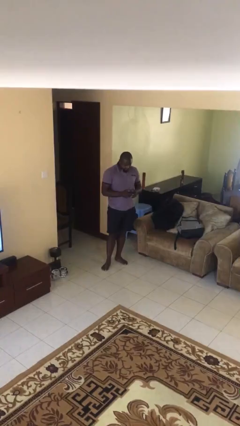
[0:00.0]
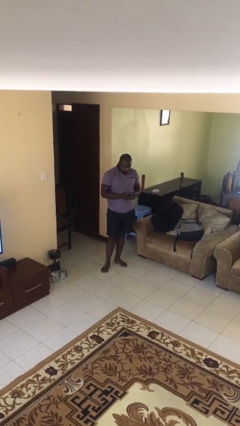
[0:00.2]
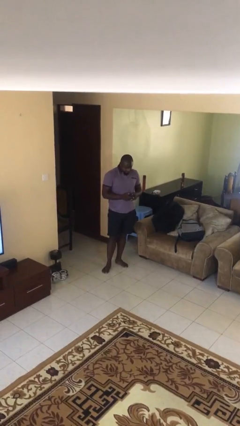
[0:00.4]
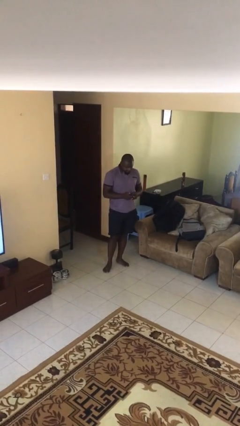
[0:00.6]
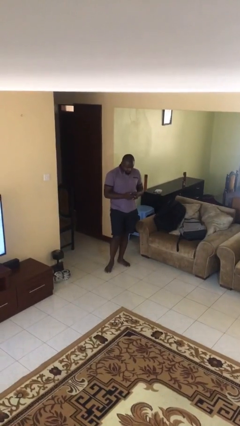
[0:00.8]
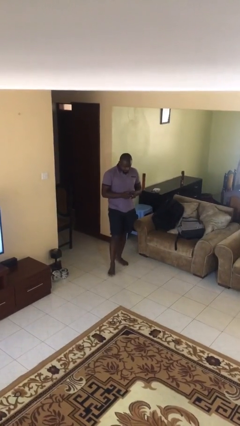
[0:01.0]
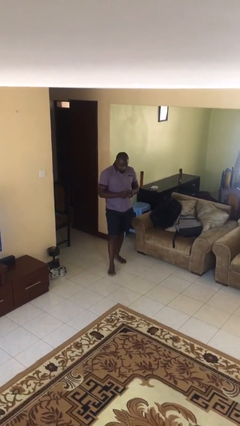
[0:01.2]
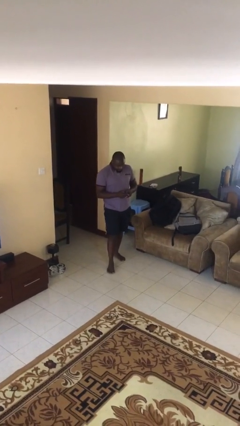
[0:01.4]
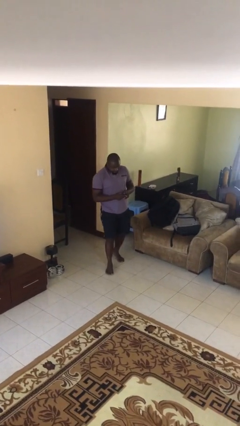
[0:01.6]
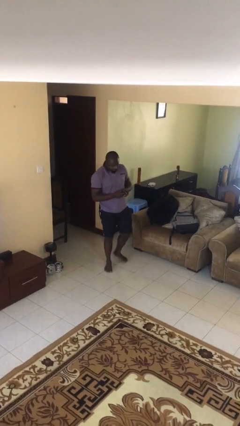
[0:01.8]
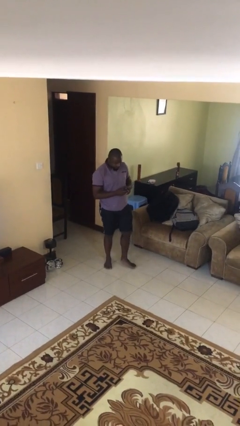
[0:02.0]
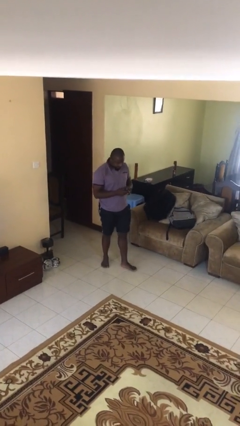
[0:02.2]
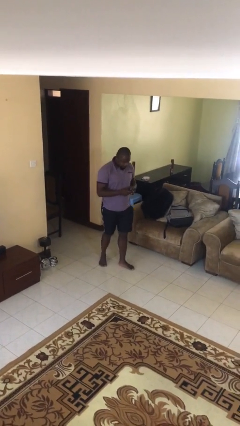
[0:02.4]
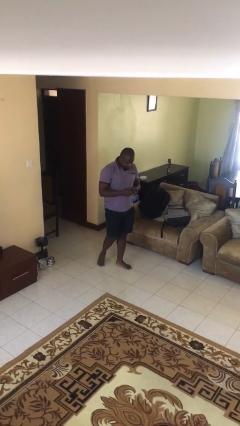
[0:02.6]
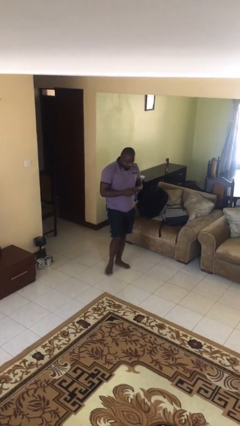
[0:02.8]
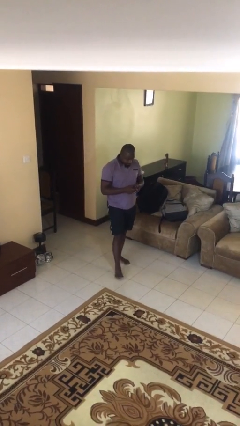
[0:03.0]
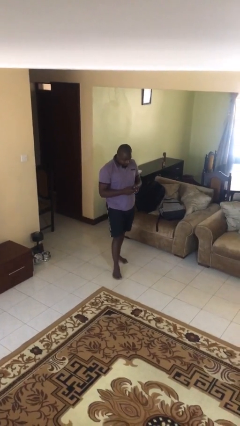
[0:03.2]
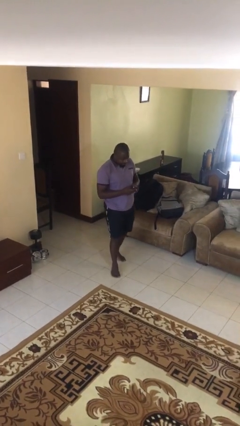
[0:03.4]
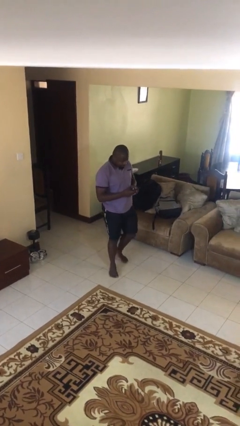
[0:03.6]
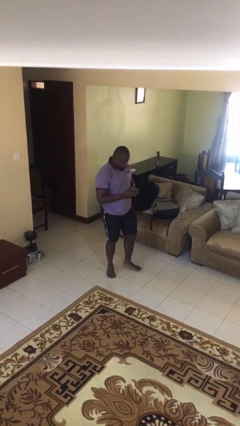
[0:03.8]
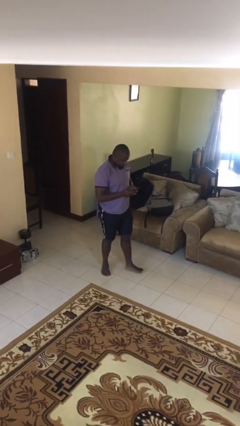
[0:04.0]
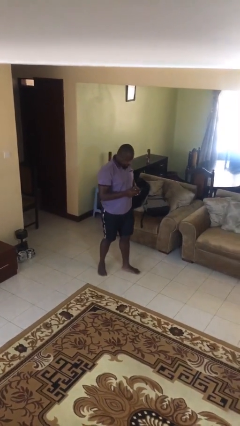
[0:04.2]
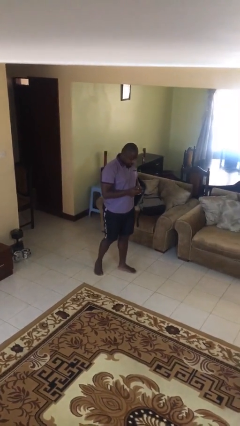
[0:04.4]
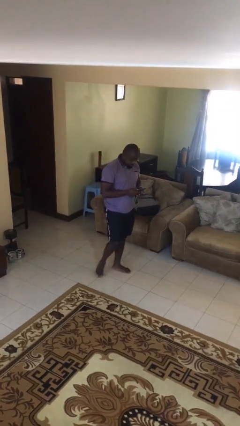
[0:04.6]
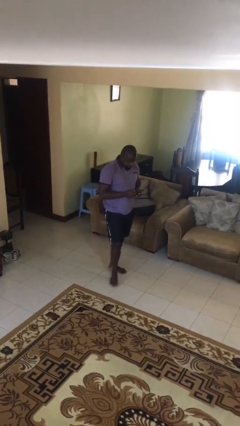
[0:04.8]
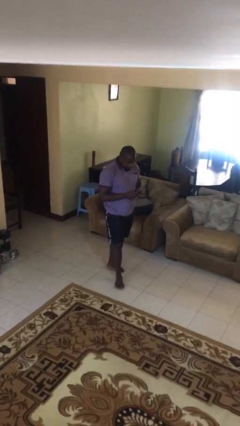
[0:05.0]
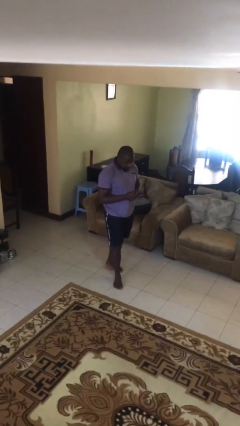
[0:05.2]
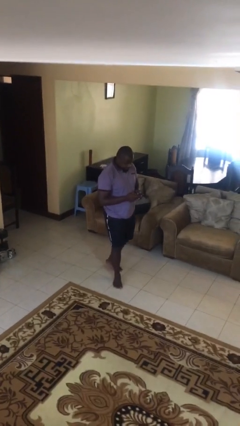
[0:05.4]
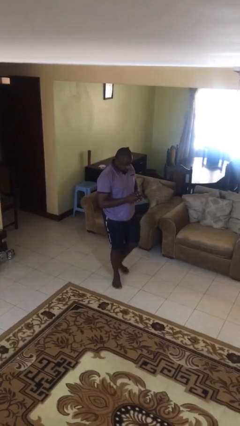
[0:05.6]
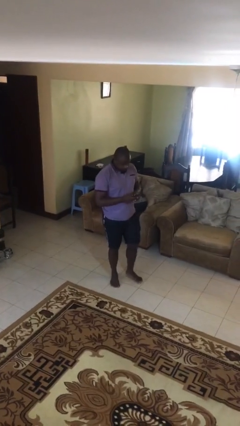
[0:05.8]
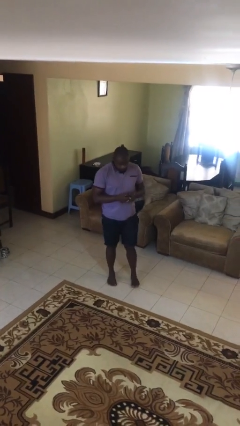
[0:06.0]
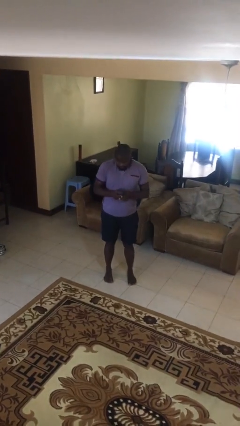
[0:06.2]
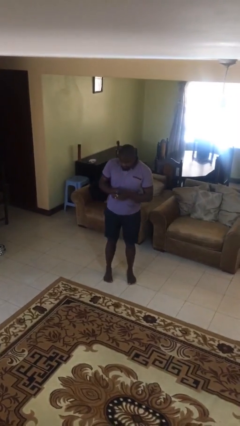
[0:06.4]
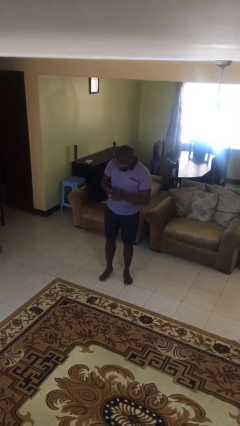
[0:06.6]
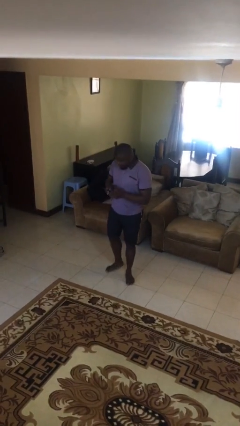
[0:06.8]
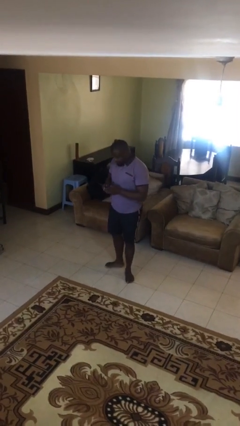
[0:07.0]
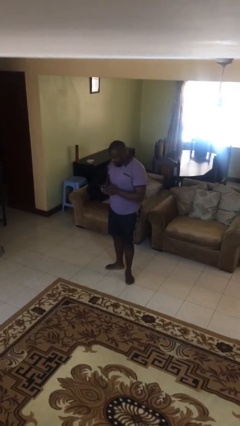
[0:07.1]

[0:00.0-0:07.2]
person texts on phone

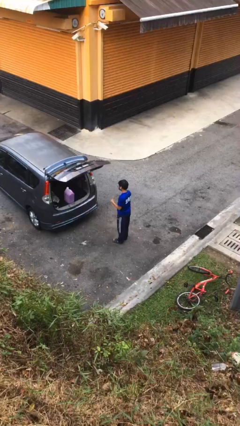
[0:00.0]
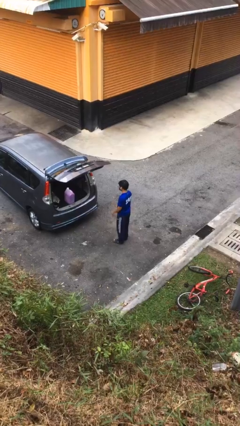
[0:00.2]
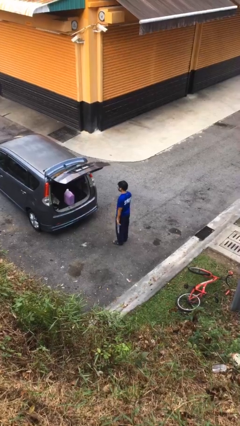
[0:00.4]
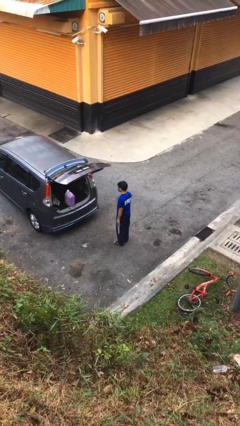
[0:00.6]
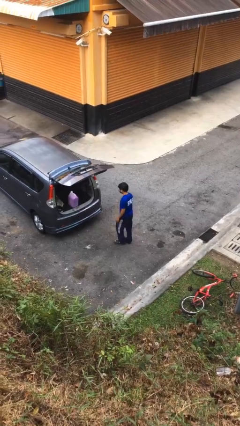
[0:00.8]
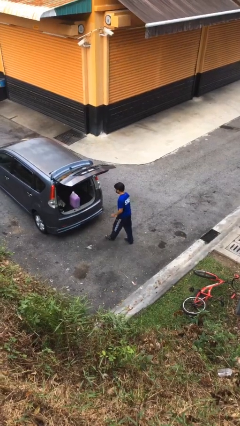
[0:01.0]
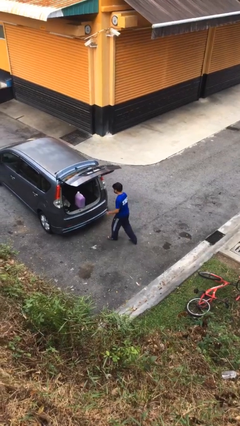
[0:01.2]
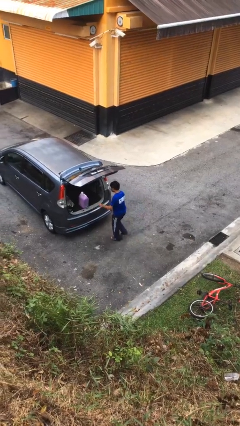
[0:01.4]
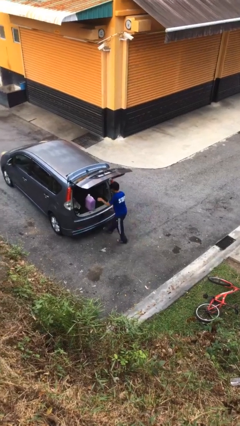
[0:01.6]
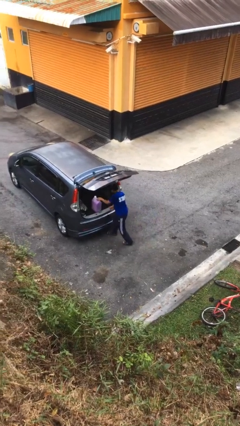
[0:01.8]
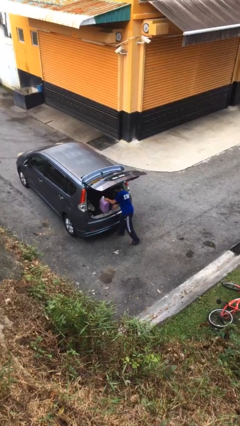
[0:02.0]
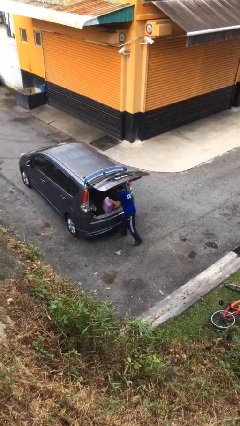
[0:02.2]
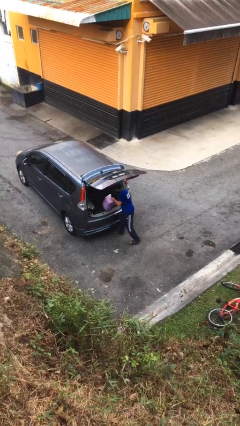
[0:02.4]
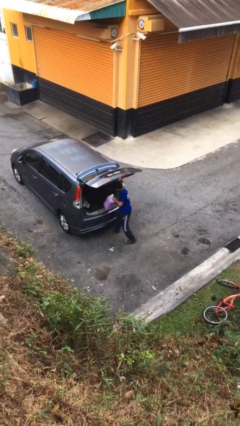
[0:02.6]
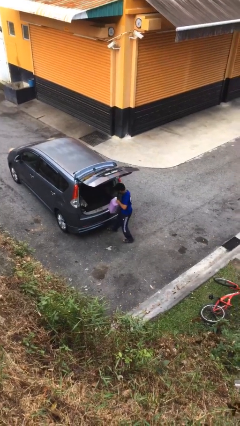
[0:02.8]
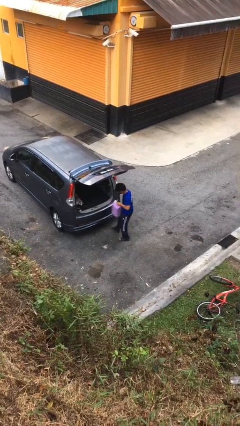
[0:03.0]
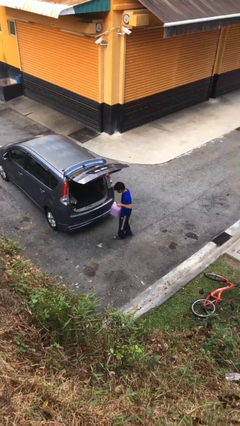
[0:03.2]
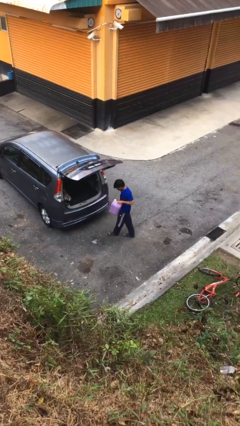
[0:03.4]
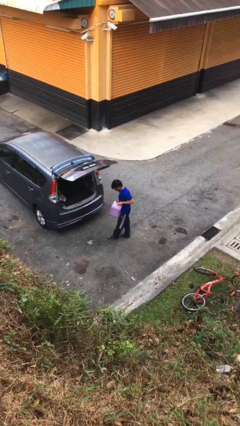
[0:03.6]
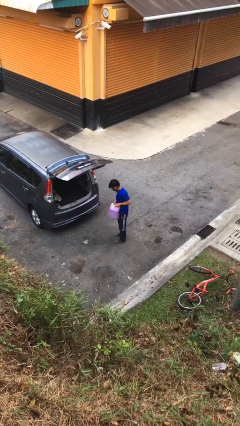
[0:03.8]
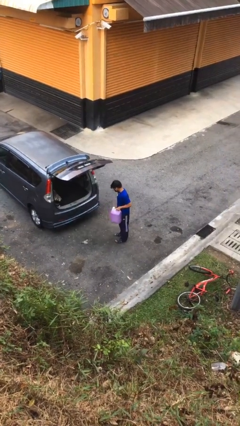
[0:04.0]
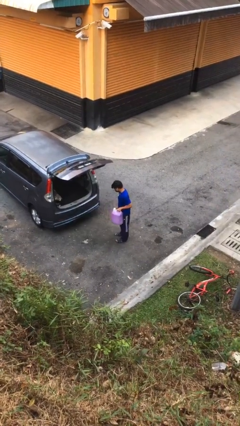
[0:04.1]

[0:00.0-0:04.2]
person unloads car

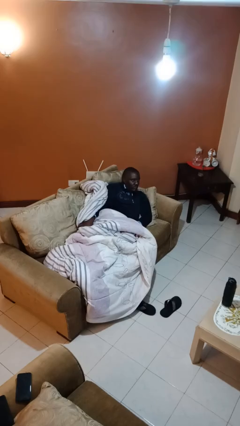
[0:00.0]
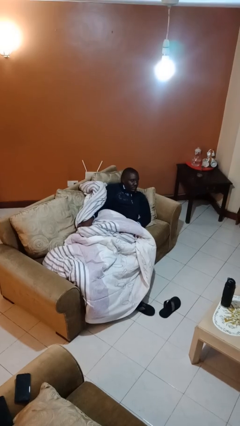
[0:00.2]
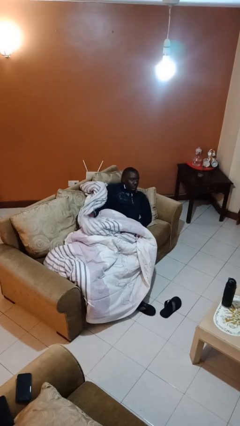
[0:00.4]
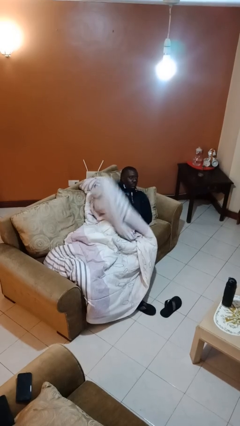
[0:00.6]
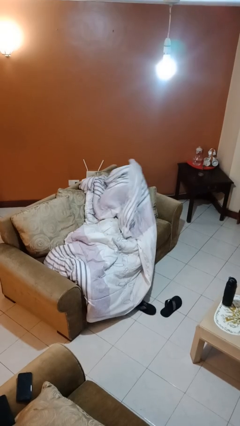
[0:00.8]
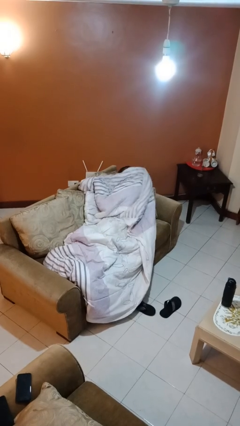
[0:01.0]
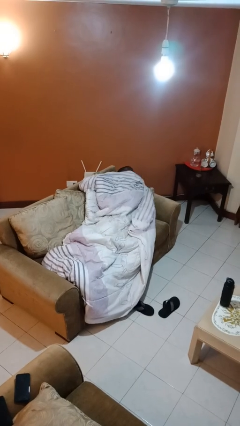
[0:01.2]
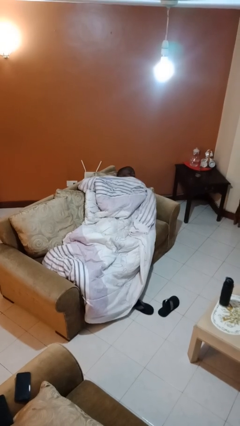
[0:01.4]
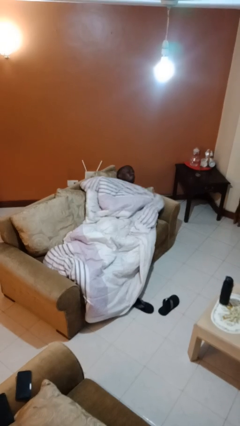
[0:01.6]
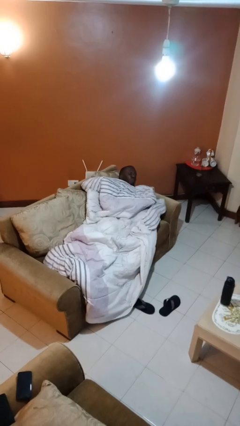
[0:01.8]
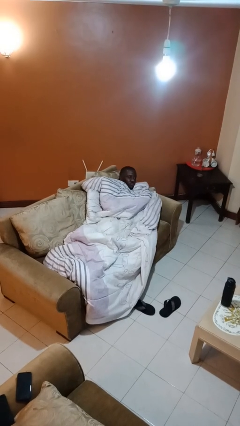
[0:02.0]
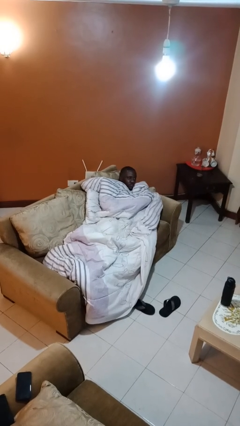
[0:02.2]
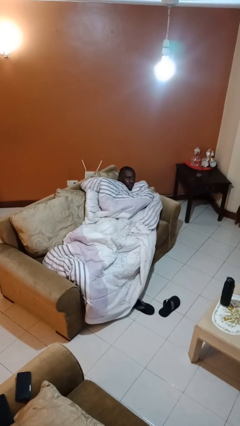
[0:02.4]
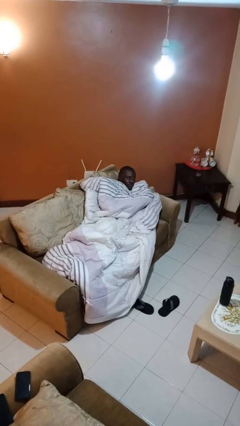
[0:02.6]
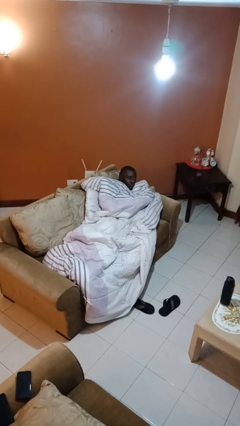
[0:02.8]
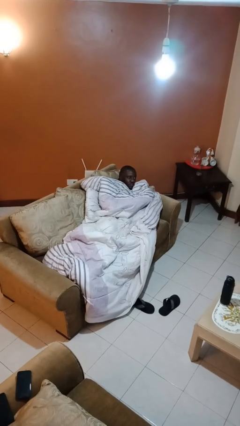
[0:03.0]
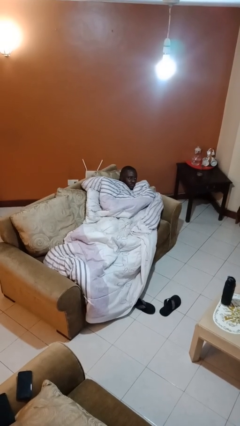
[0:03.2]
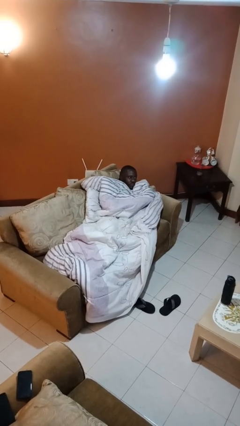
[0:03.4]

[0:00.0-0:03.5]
person covers with blanket

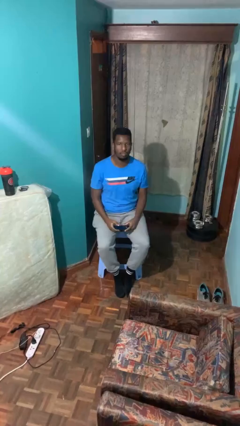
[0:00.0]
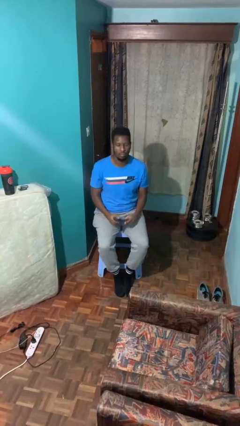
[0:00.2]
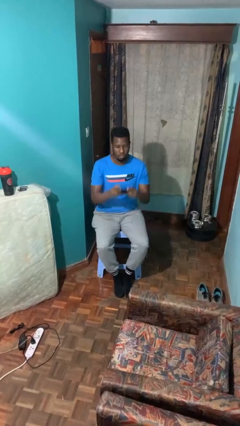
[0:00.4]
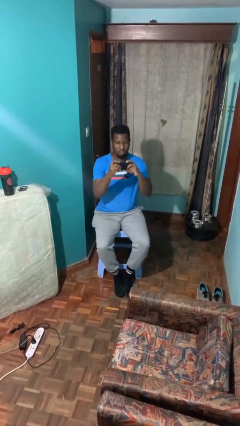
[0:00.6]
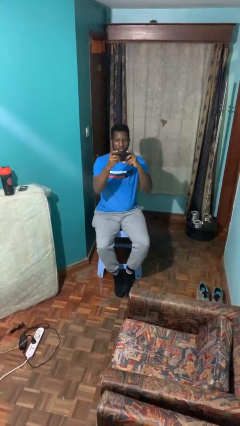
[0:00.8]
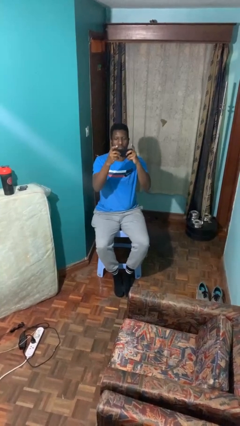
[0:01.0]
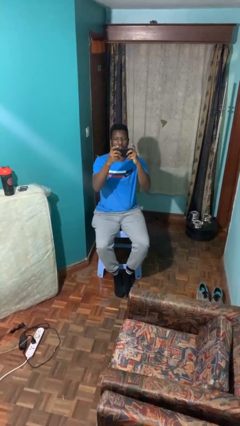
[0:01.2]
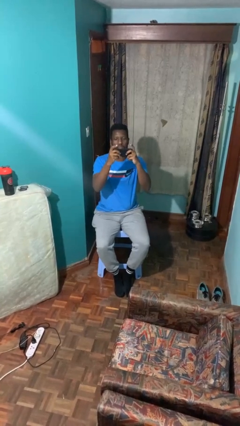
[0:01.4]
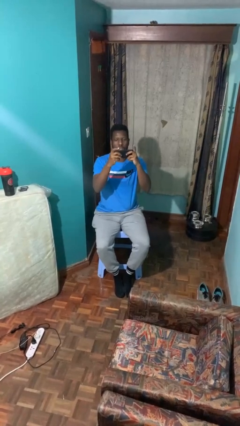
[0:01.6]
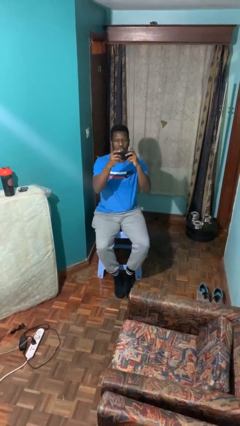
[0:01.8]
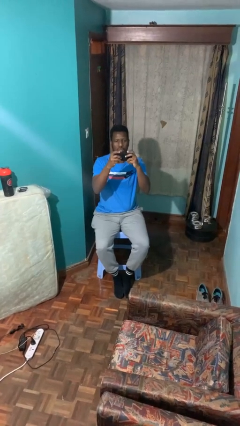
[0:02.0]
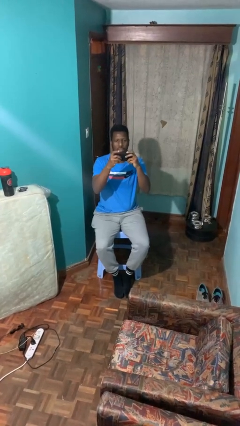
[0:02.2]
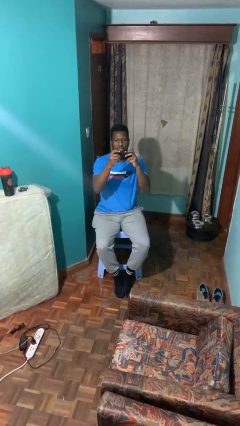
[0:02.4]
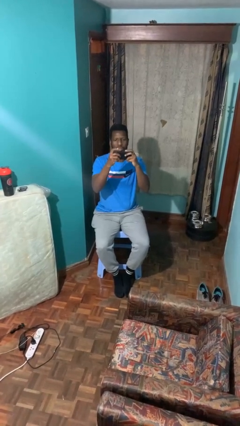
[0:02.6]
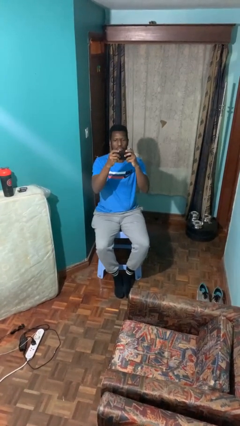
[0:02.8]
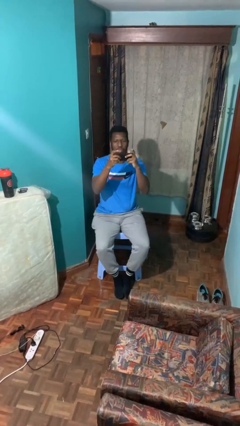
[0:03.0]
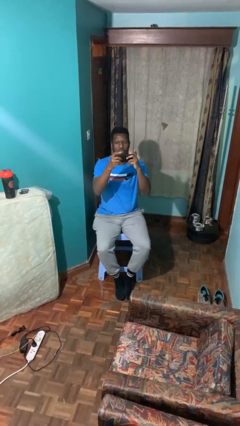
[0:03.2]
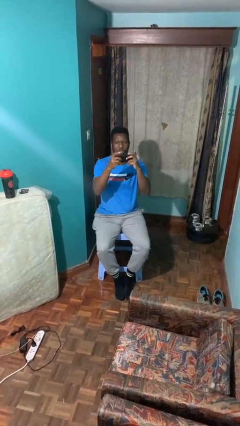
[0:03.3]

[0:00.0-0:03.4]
person interacts with handheld game
